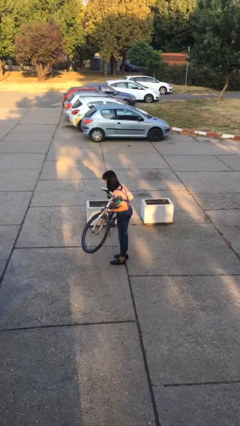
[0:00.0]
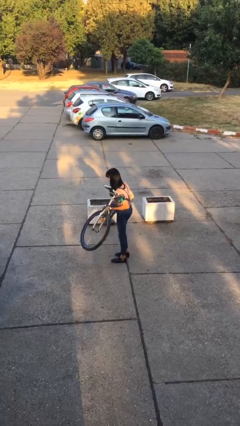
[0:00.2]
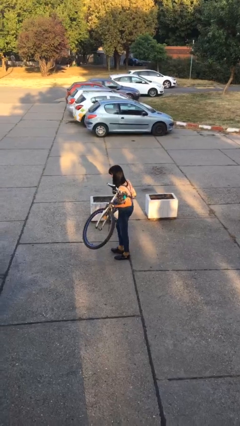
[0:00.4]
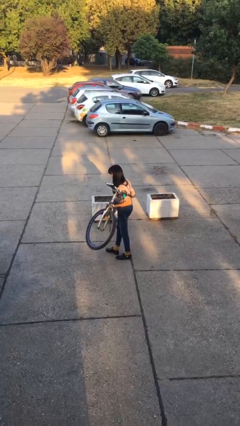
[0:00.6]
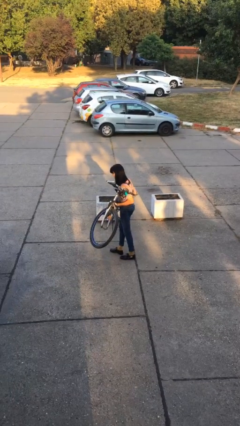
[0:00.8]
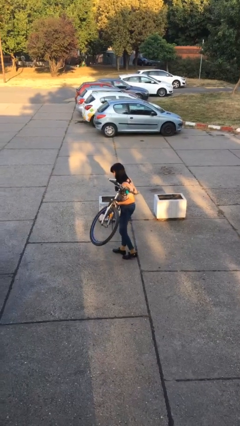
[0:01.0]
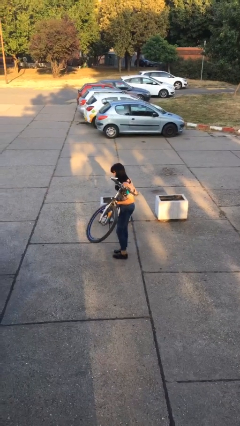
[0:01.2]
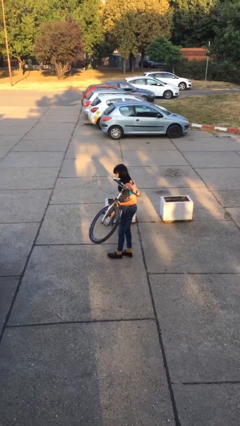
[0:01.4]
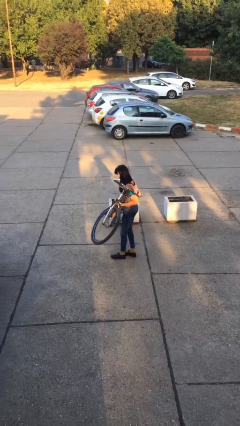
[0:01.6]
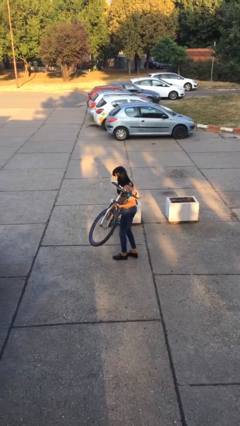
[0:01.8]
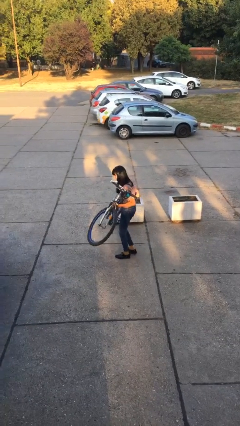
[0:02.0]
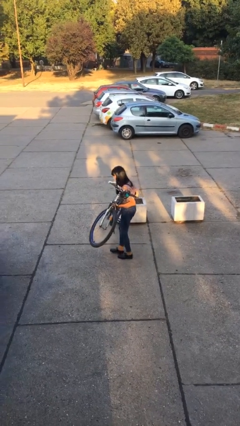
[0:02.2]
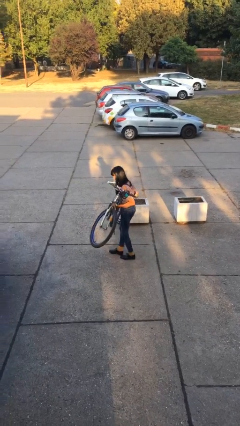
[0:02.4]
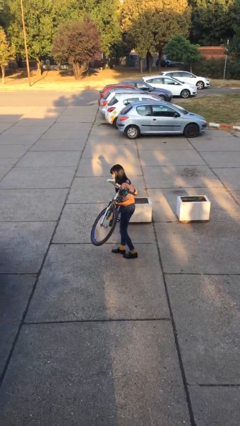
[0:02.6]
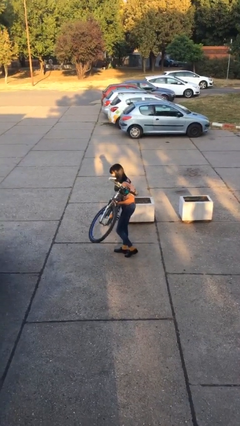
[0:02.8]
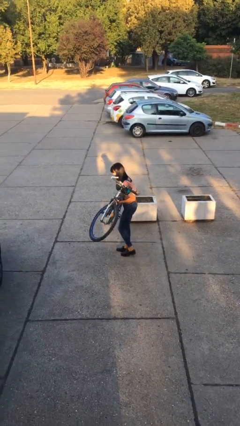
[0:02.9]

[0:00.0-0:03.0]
person carries heavy object

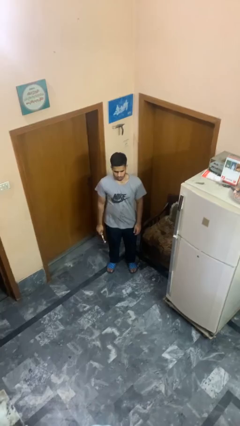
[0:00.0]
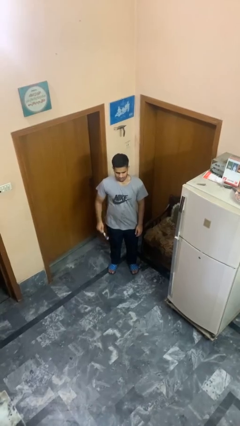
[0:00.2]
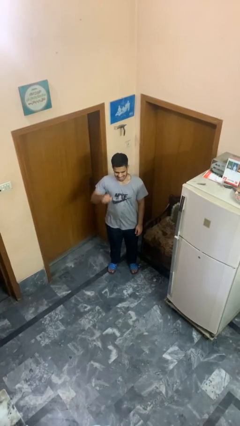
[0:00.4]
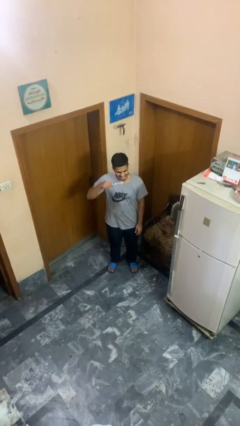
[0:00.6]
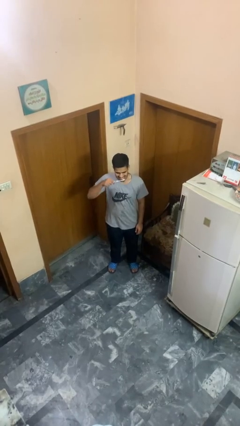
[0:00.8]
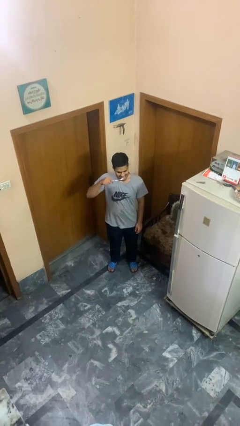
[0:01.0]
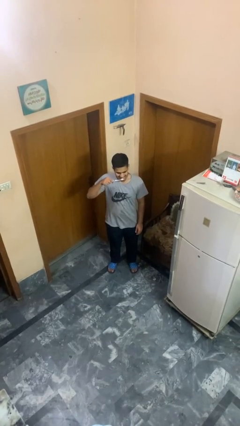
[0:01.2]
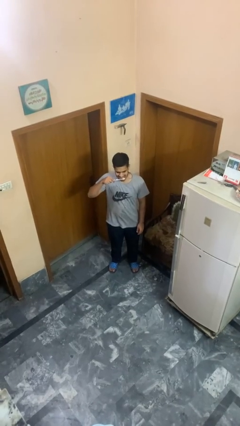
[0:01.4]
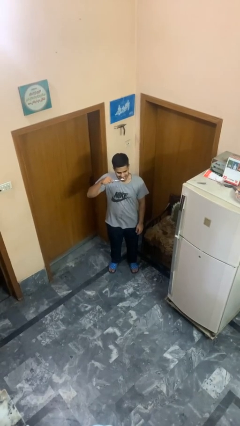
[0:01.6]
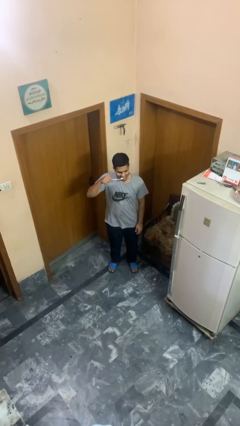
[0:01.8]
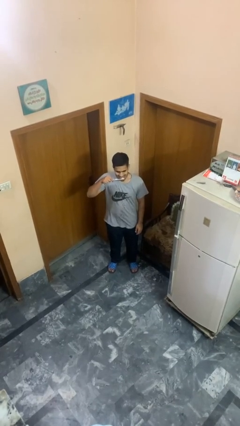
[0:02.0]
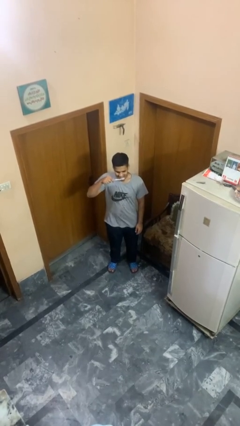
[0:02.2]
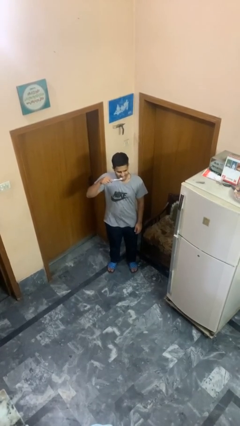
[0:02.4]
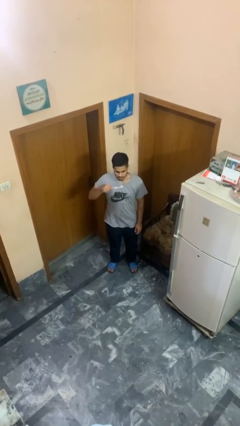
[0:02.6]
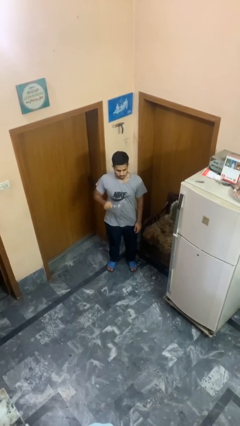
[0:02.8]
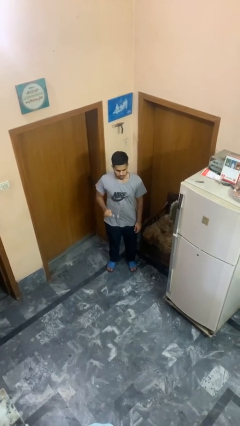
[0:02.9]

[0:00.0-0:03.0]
person brushes teeth

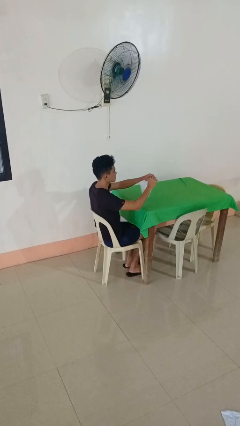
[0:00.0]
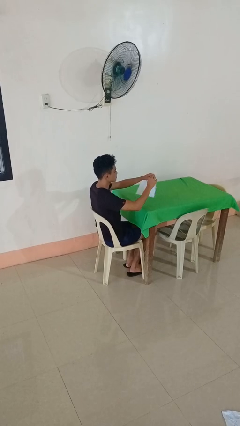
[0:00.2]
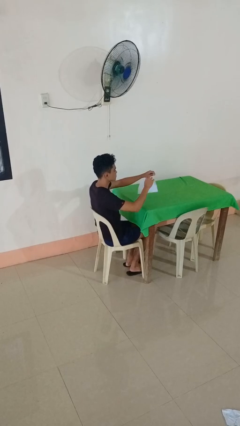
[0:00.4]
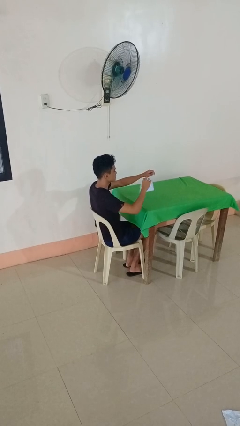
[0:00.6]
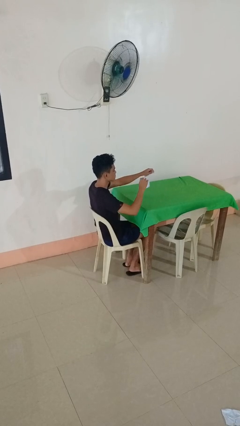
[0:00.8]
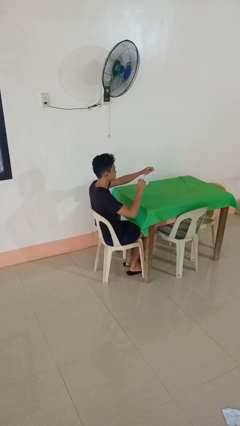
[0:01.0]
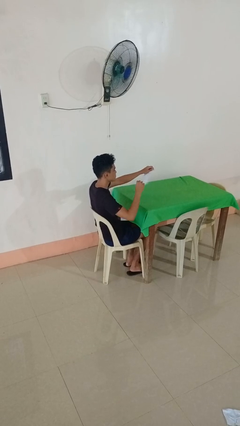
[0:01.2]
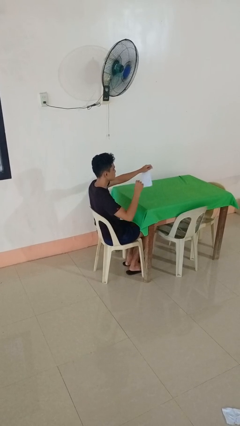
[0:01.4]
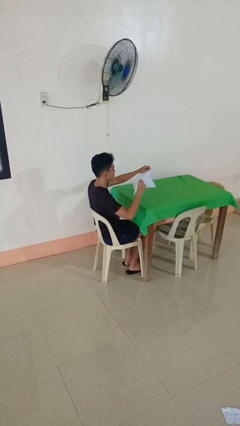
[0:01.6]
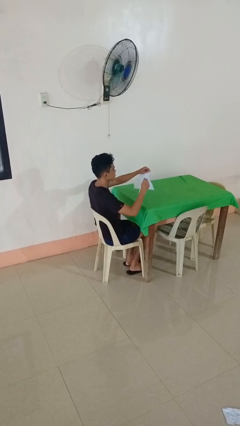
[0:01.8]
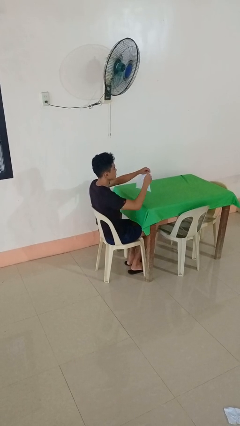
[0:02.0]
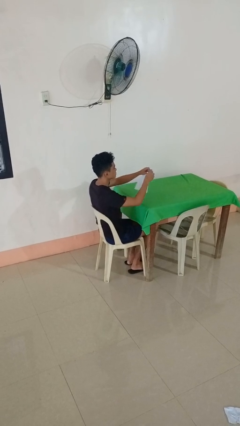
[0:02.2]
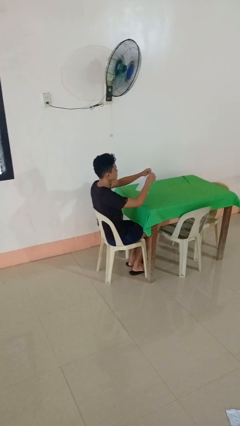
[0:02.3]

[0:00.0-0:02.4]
person tears paper

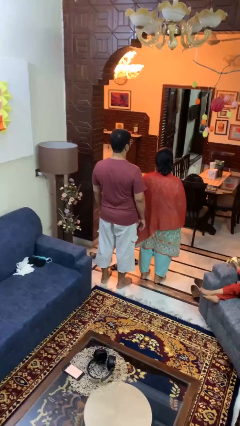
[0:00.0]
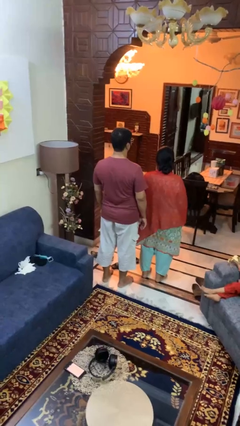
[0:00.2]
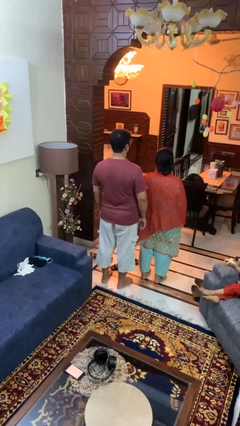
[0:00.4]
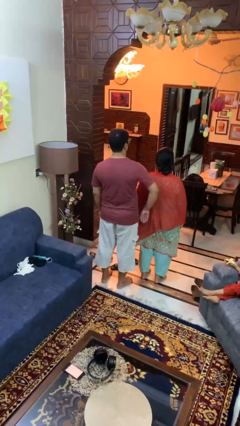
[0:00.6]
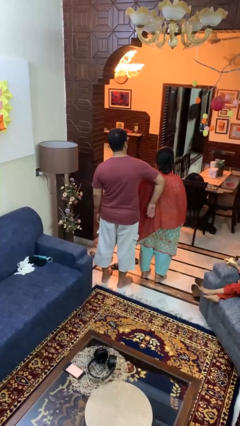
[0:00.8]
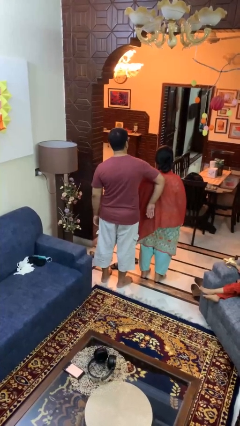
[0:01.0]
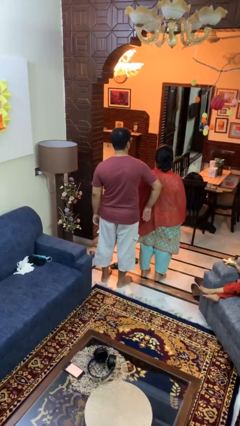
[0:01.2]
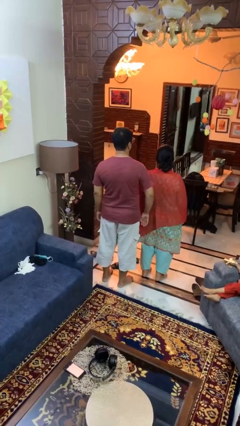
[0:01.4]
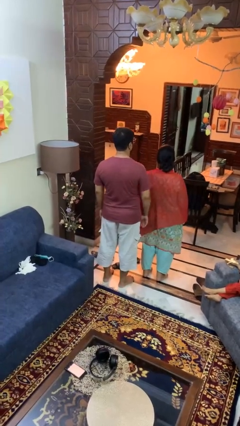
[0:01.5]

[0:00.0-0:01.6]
person shoves person

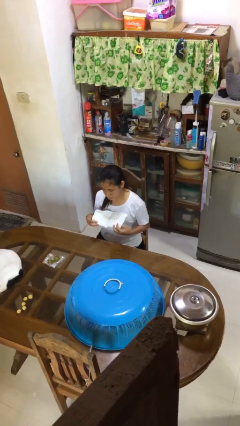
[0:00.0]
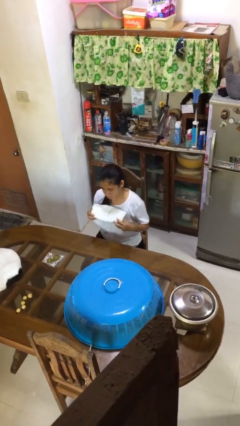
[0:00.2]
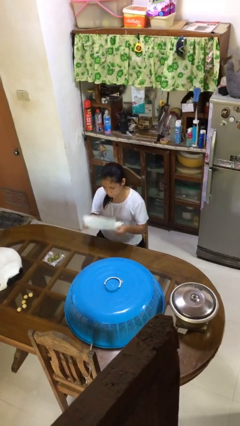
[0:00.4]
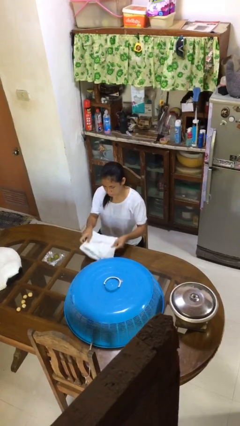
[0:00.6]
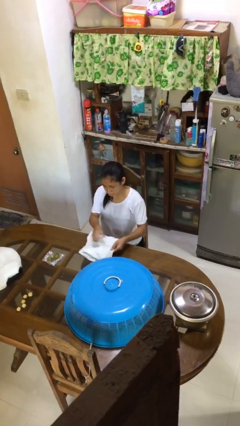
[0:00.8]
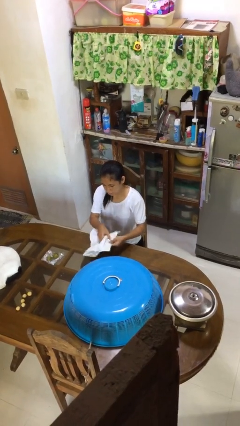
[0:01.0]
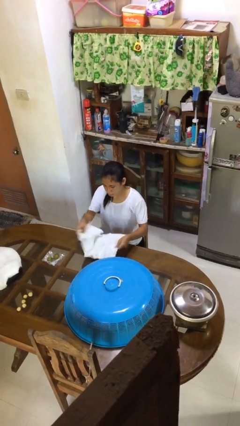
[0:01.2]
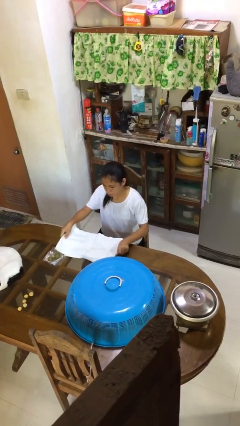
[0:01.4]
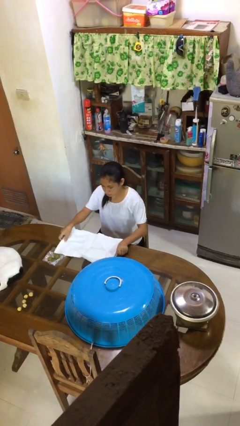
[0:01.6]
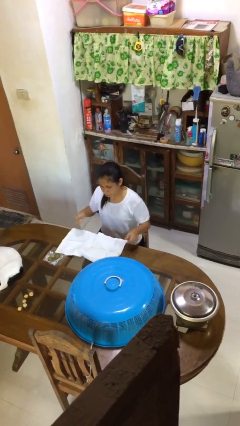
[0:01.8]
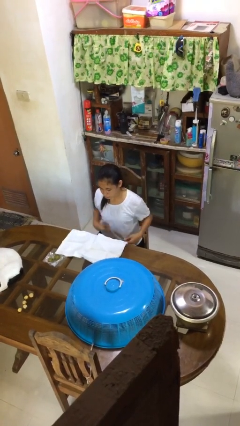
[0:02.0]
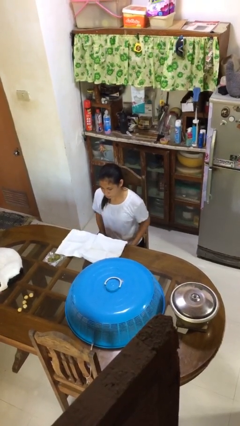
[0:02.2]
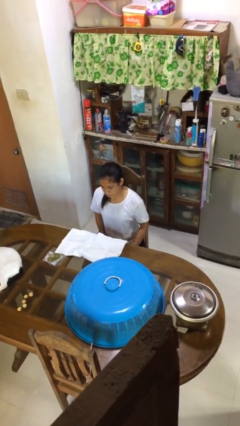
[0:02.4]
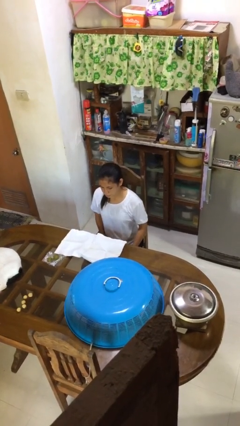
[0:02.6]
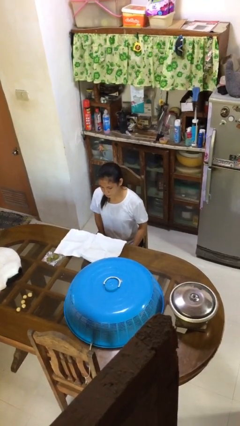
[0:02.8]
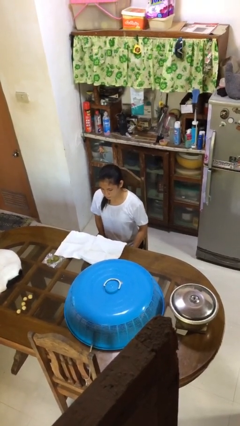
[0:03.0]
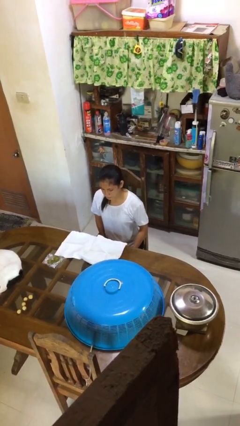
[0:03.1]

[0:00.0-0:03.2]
person spreads tablecloth

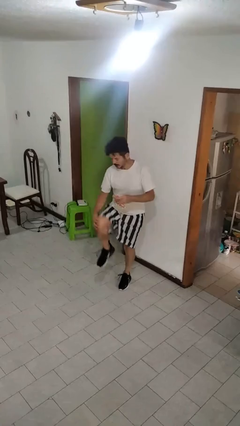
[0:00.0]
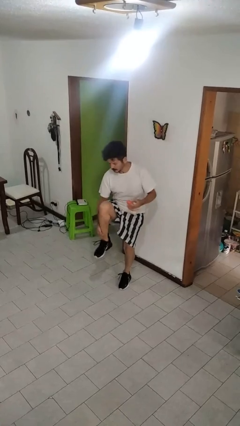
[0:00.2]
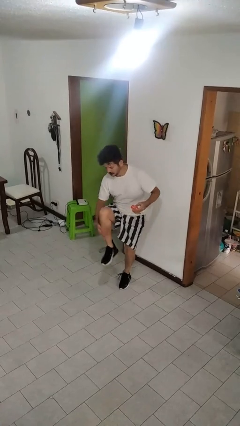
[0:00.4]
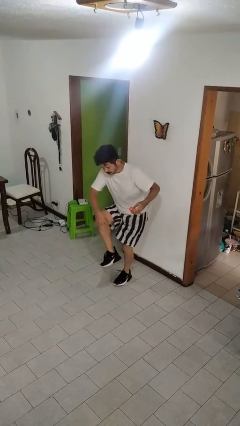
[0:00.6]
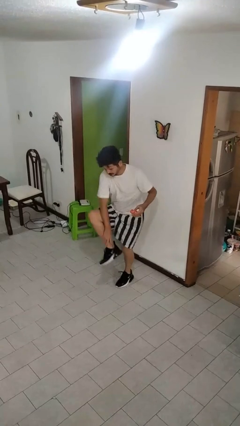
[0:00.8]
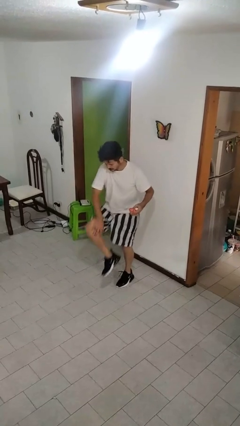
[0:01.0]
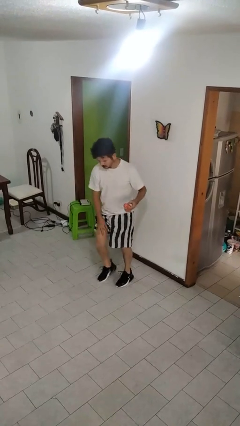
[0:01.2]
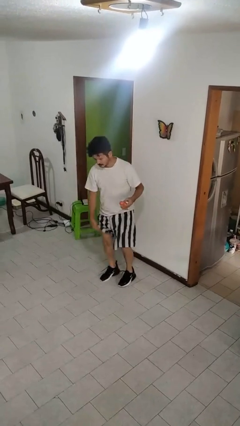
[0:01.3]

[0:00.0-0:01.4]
person applies sunscreen

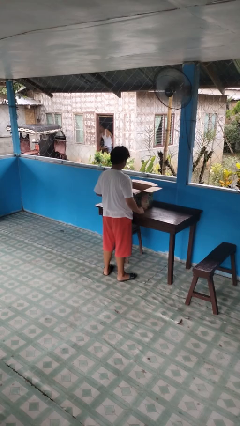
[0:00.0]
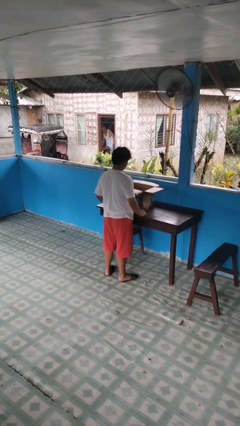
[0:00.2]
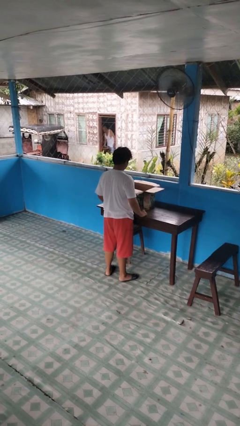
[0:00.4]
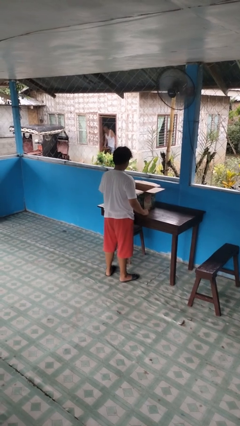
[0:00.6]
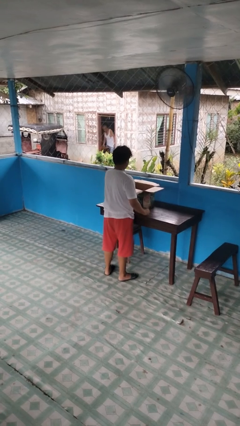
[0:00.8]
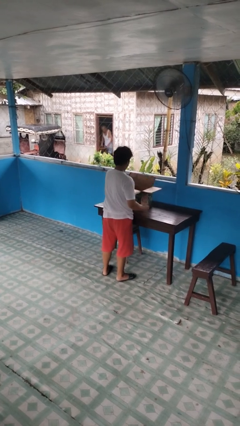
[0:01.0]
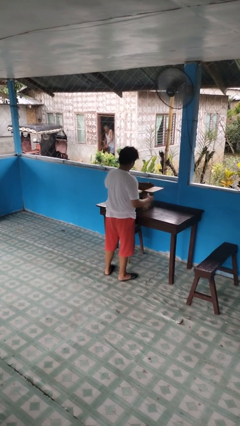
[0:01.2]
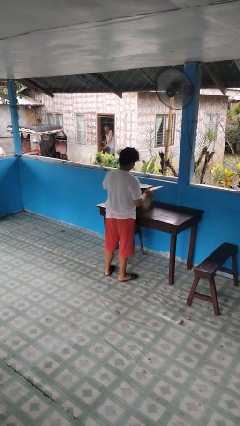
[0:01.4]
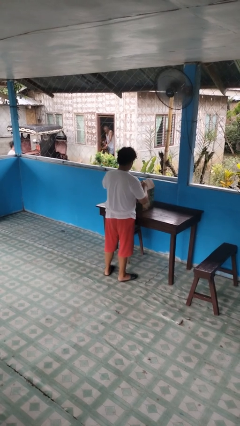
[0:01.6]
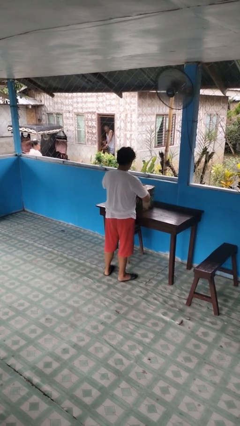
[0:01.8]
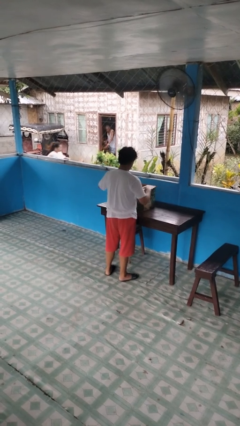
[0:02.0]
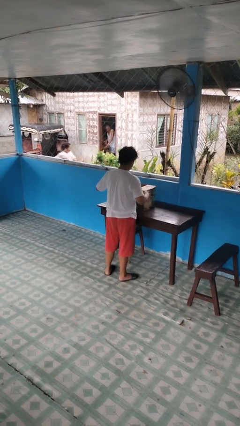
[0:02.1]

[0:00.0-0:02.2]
person closes box
